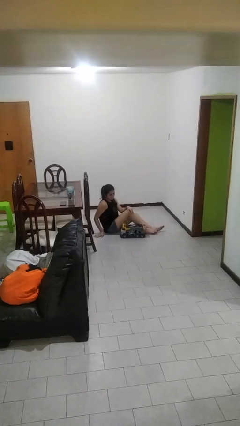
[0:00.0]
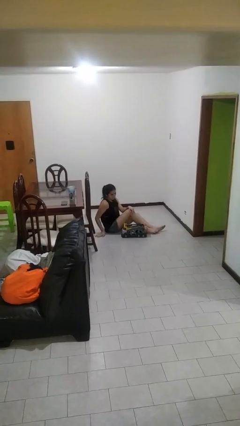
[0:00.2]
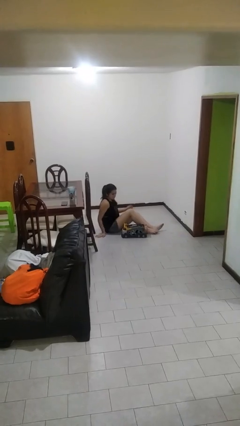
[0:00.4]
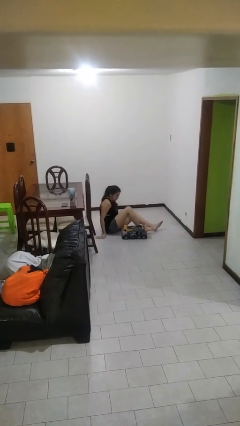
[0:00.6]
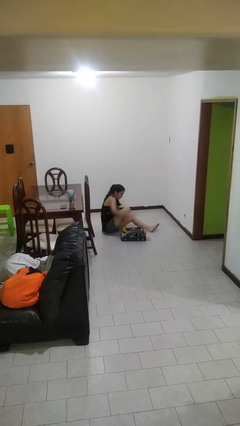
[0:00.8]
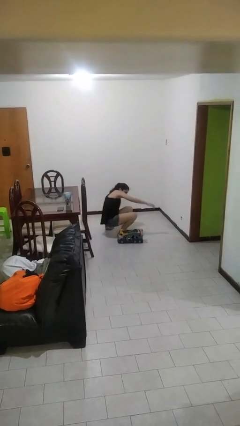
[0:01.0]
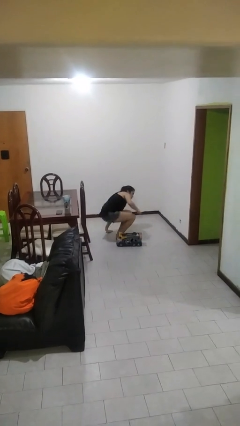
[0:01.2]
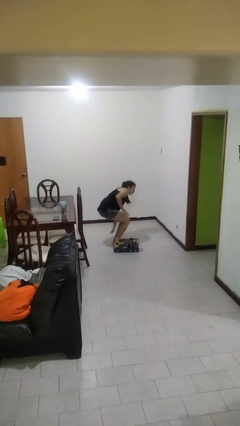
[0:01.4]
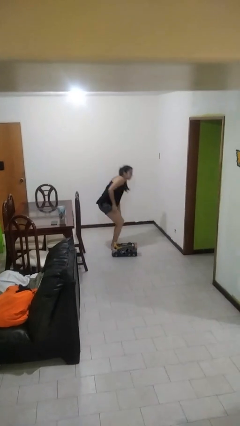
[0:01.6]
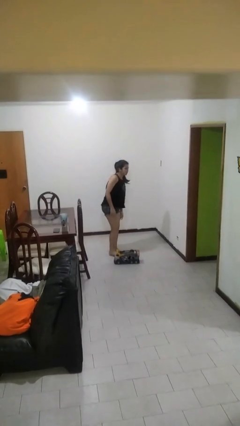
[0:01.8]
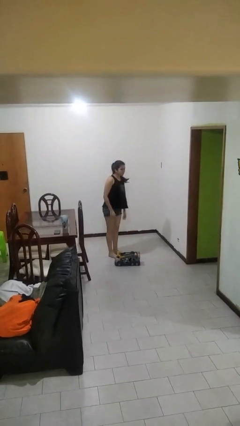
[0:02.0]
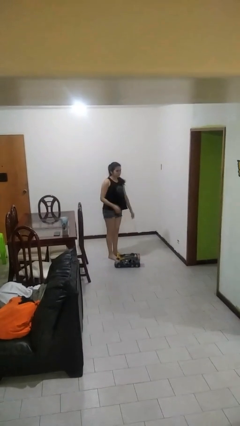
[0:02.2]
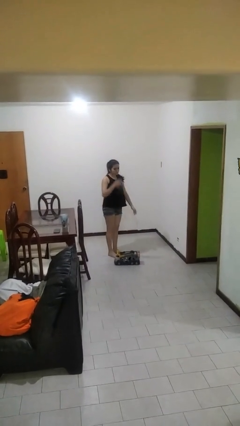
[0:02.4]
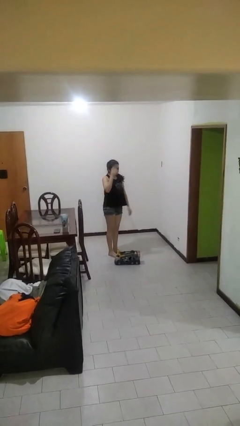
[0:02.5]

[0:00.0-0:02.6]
person stands up from floor

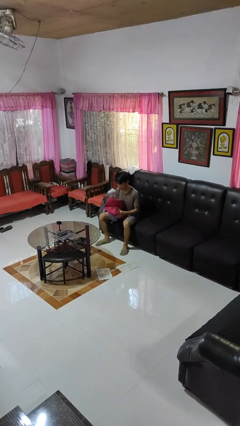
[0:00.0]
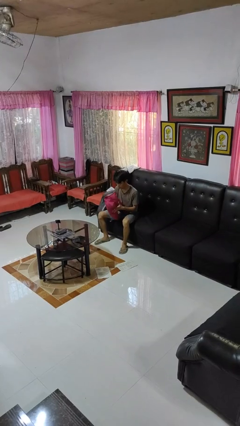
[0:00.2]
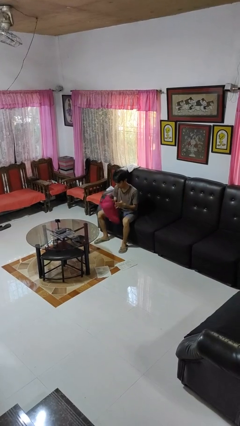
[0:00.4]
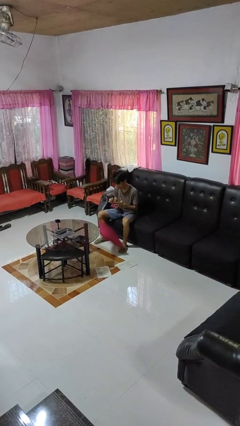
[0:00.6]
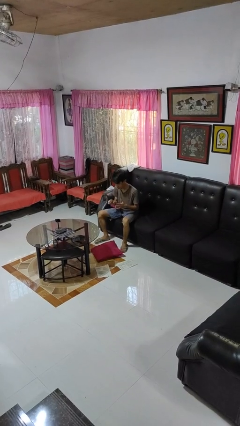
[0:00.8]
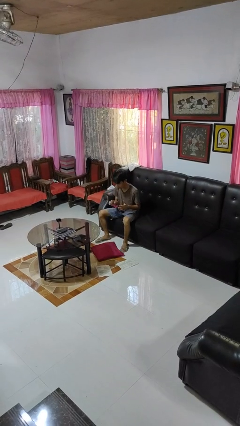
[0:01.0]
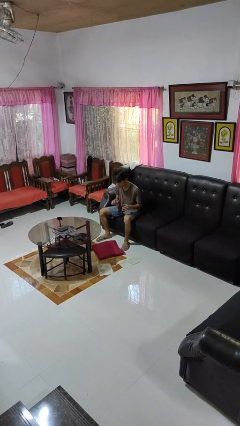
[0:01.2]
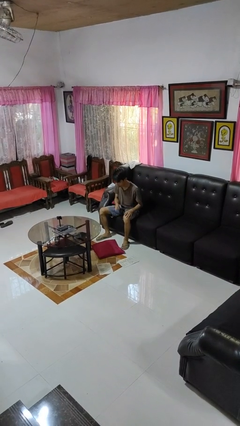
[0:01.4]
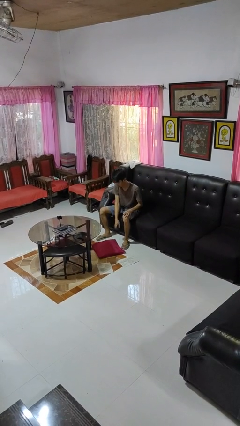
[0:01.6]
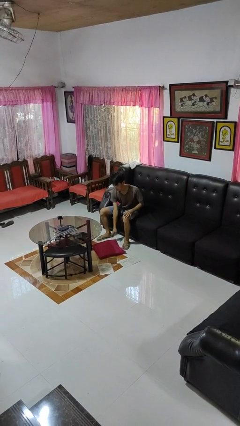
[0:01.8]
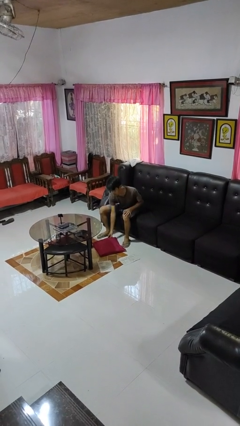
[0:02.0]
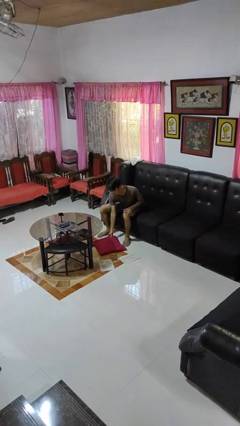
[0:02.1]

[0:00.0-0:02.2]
person drops object

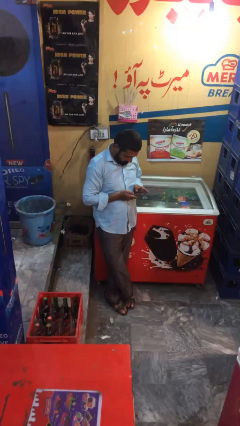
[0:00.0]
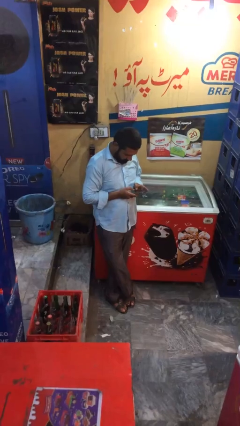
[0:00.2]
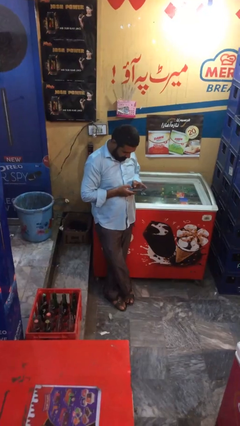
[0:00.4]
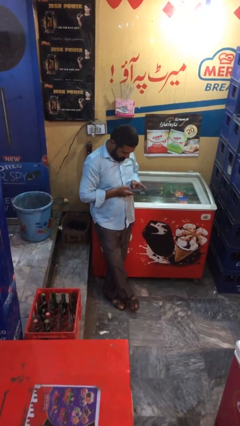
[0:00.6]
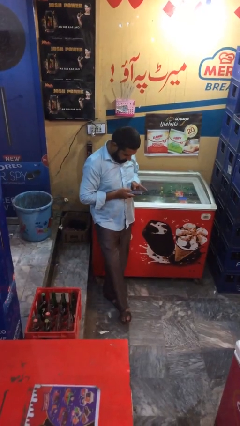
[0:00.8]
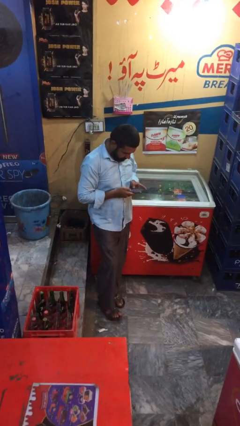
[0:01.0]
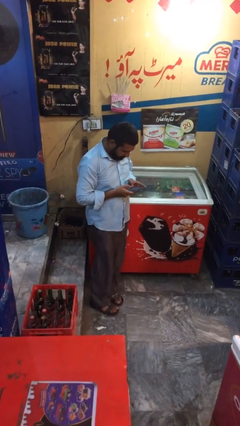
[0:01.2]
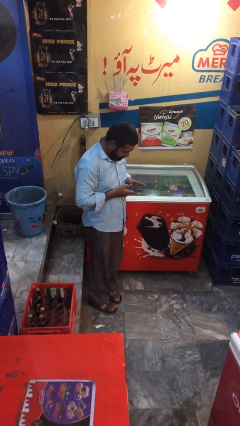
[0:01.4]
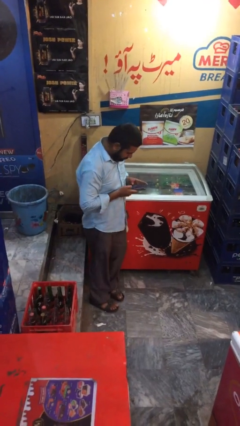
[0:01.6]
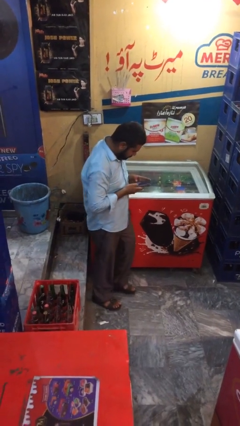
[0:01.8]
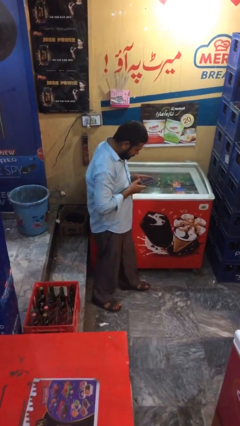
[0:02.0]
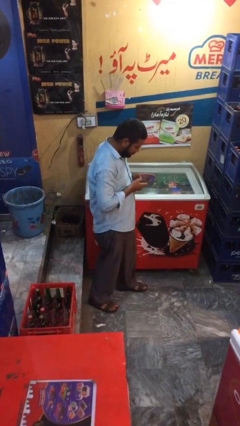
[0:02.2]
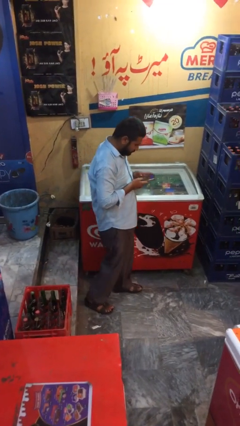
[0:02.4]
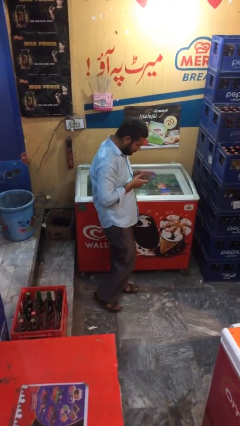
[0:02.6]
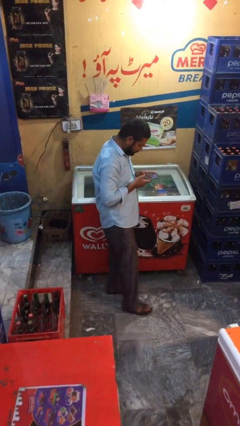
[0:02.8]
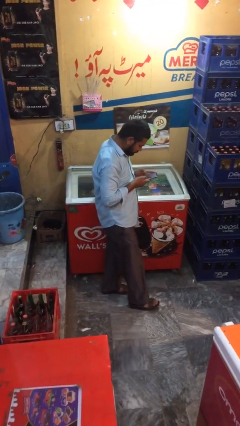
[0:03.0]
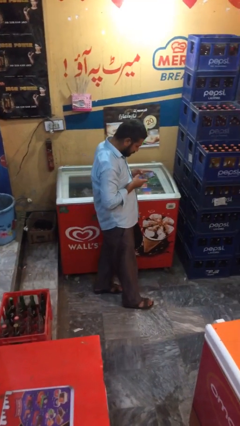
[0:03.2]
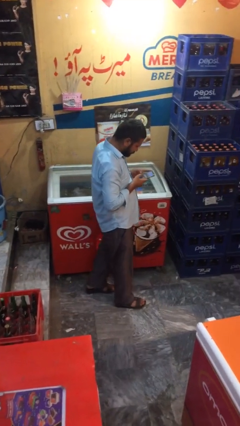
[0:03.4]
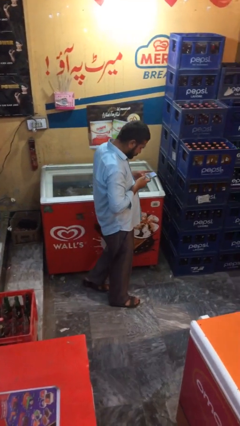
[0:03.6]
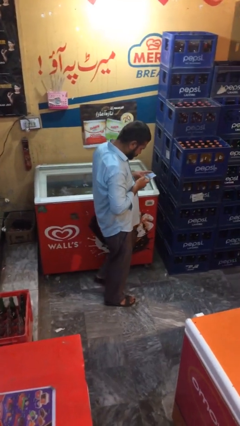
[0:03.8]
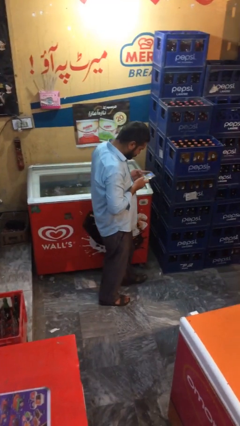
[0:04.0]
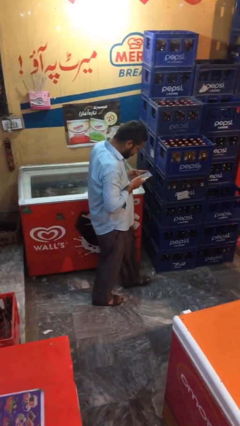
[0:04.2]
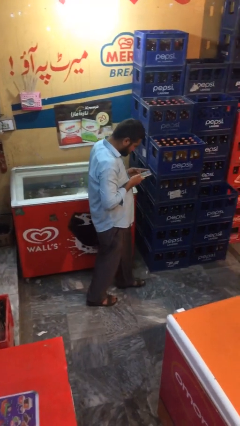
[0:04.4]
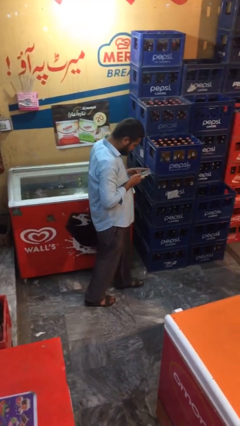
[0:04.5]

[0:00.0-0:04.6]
person texts on phone

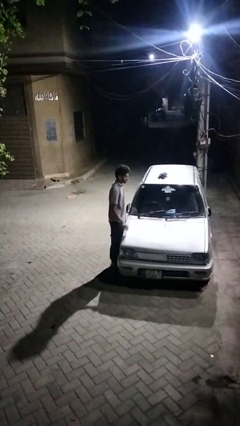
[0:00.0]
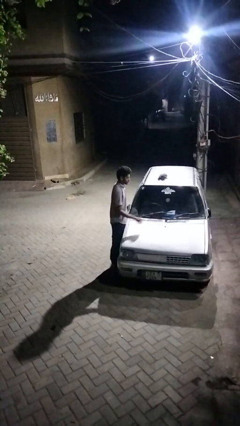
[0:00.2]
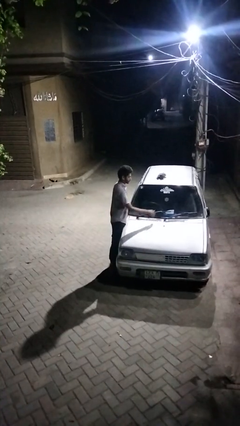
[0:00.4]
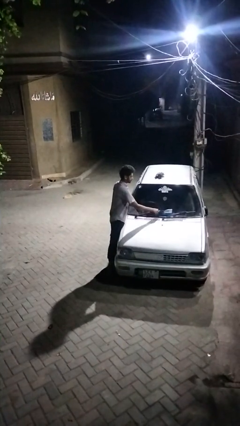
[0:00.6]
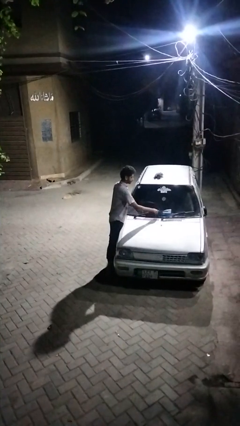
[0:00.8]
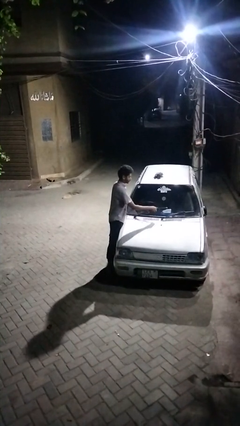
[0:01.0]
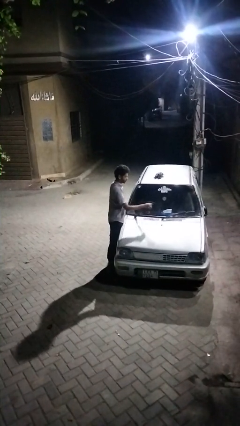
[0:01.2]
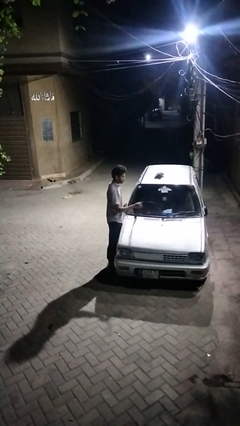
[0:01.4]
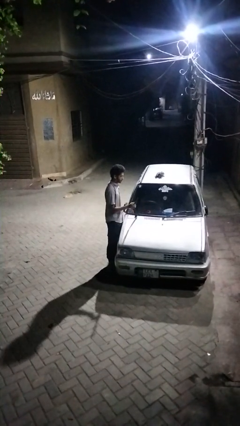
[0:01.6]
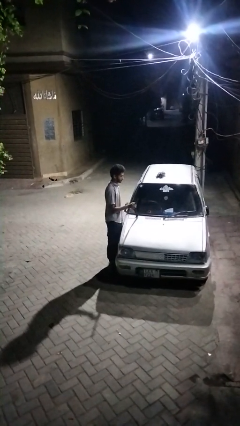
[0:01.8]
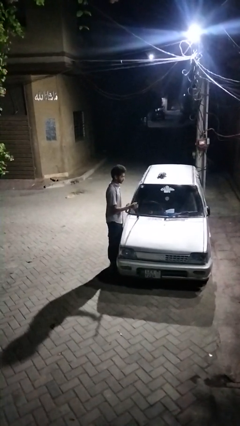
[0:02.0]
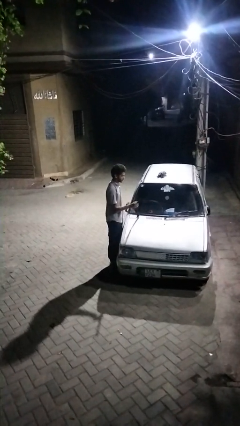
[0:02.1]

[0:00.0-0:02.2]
person flips up car wipers

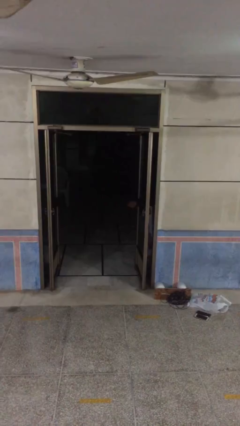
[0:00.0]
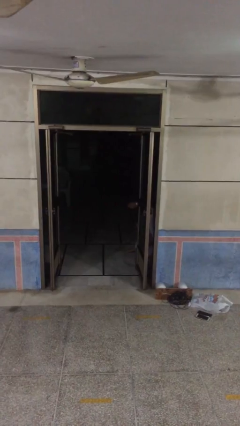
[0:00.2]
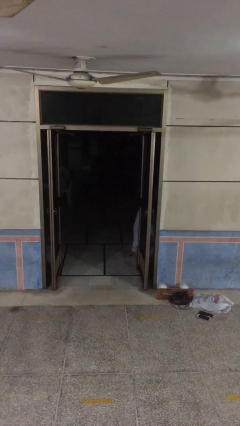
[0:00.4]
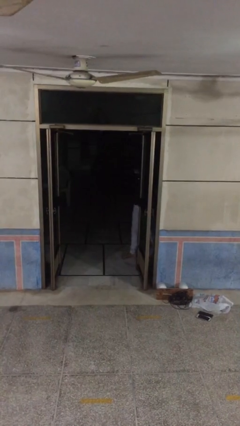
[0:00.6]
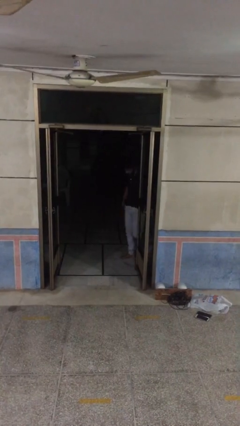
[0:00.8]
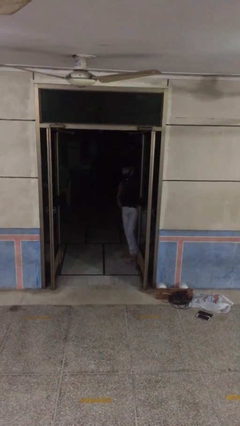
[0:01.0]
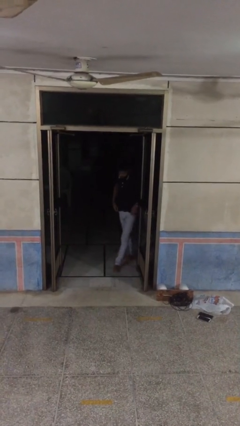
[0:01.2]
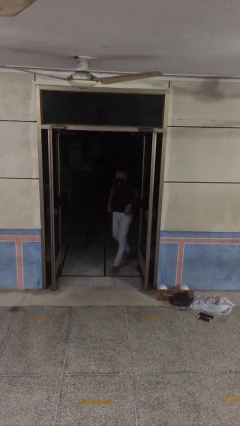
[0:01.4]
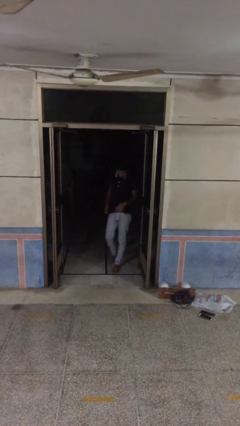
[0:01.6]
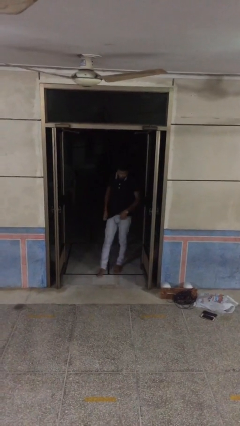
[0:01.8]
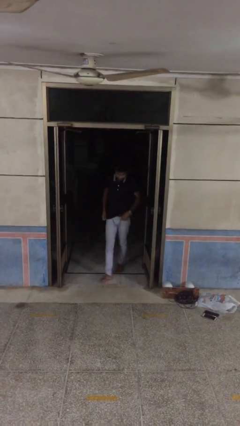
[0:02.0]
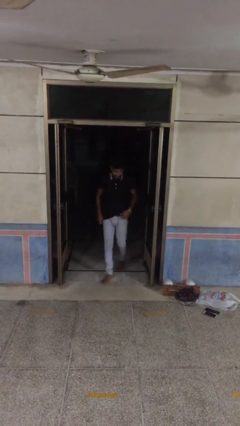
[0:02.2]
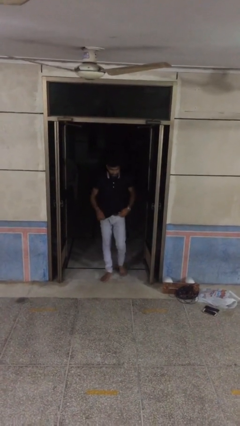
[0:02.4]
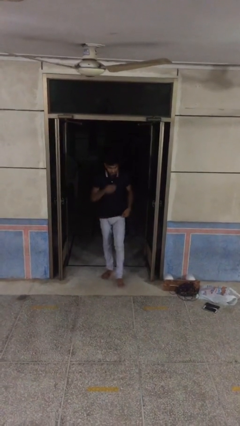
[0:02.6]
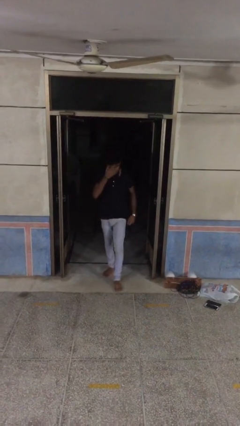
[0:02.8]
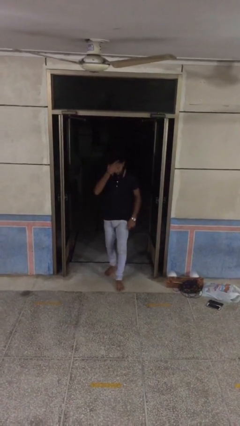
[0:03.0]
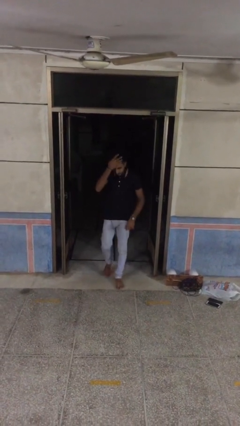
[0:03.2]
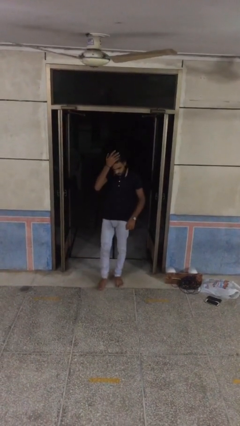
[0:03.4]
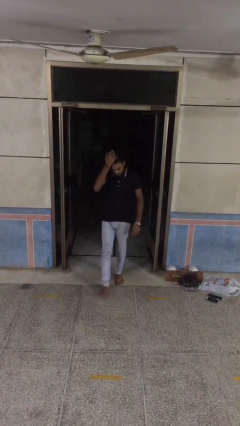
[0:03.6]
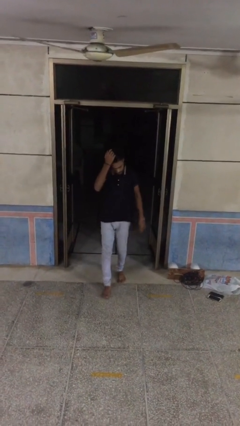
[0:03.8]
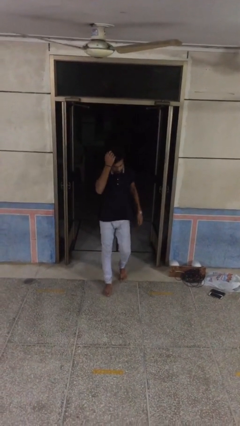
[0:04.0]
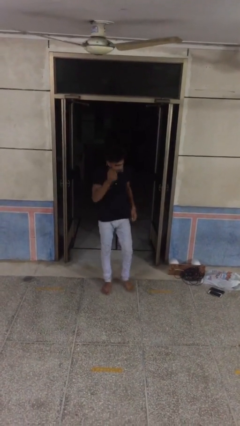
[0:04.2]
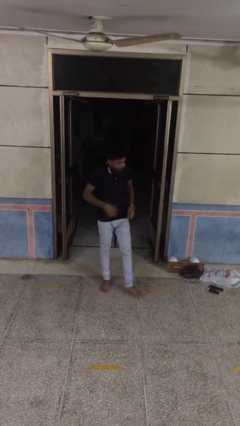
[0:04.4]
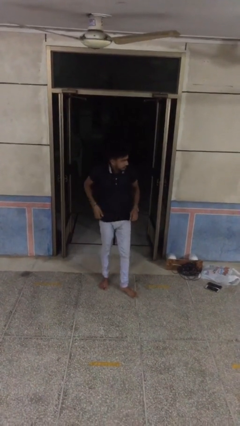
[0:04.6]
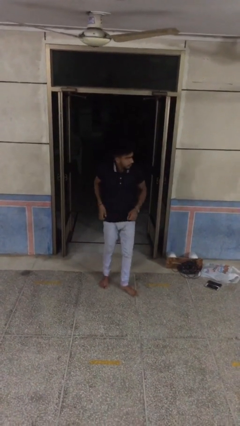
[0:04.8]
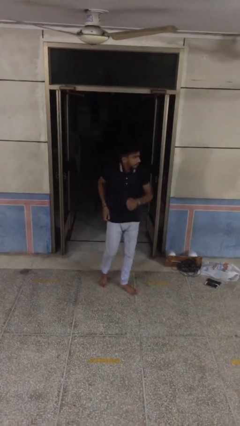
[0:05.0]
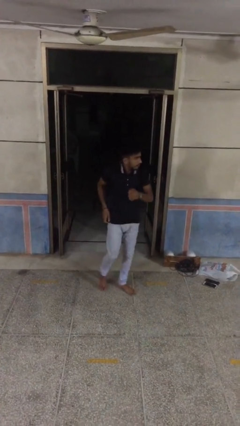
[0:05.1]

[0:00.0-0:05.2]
person enters scene through structure

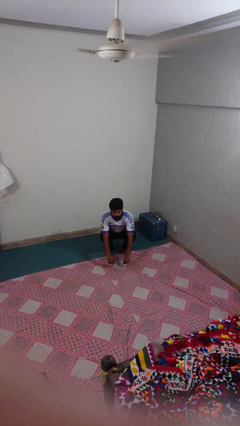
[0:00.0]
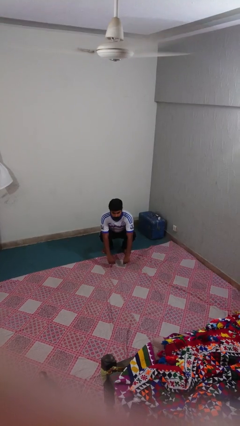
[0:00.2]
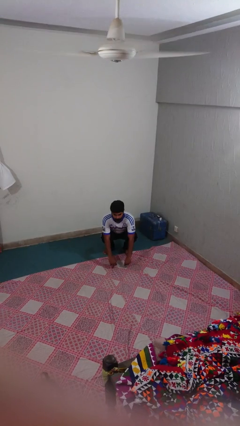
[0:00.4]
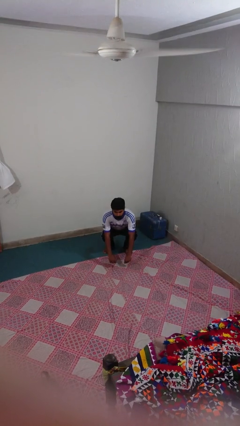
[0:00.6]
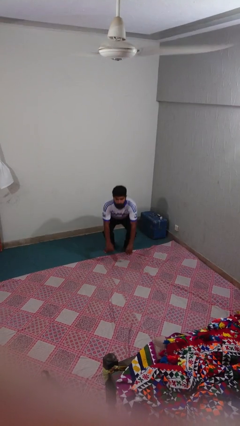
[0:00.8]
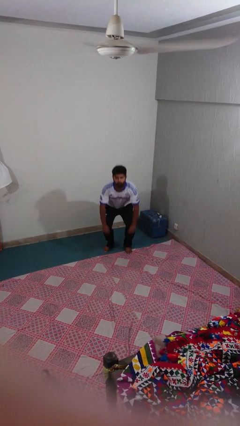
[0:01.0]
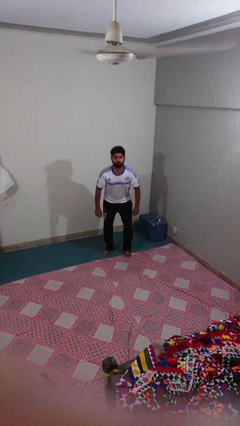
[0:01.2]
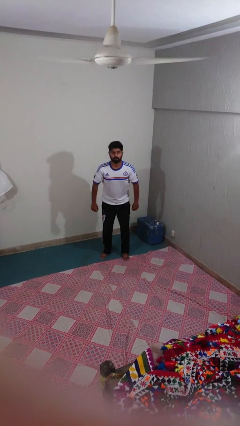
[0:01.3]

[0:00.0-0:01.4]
person stands up
